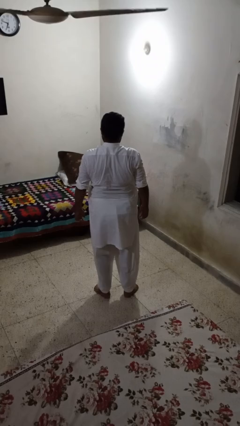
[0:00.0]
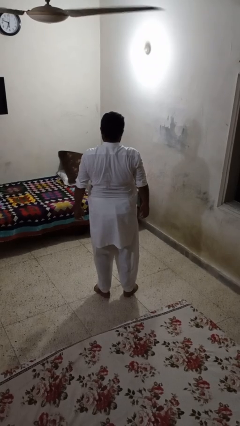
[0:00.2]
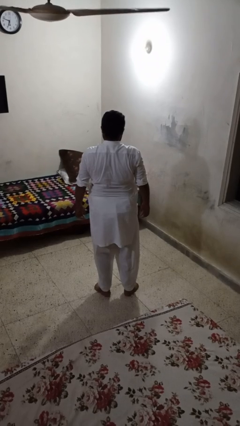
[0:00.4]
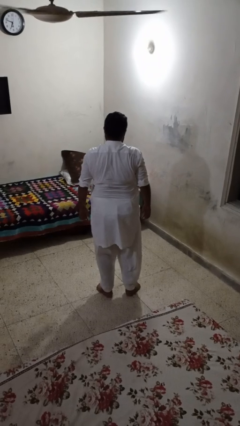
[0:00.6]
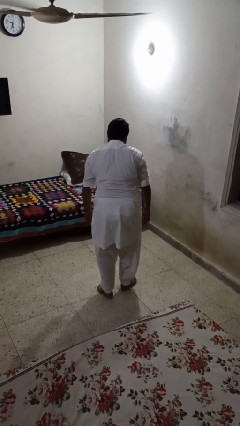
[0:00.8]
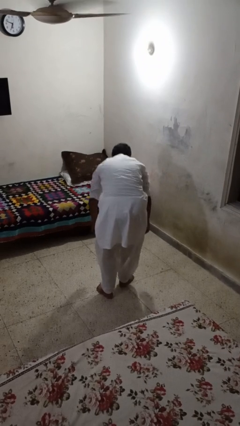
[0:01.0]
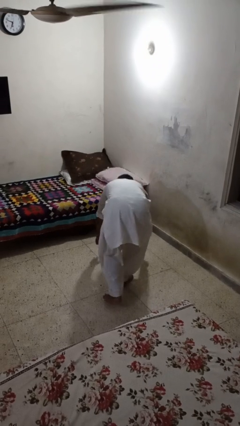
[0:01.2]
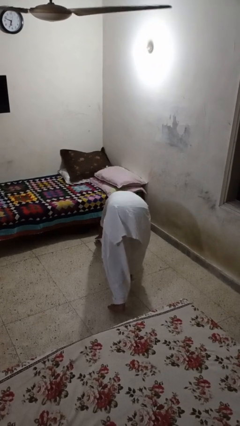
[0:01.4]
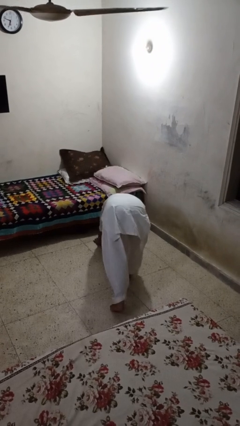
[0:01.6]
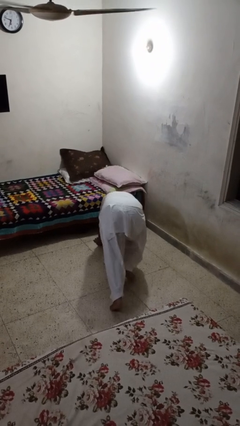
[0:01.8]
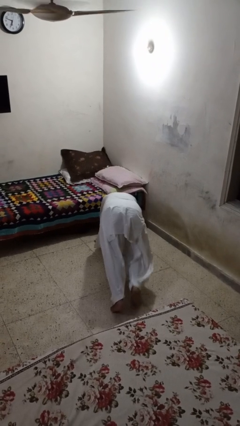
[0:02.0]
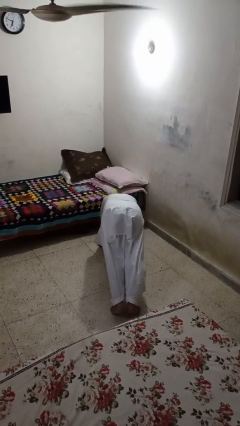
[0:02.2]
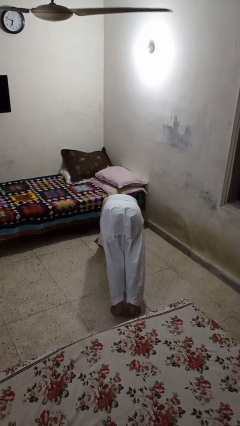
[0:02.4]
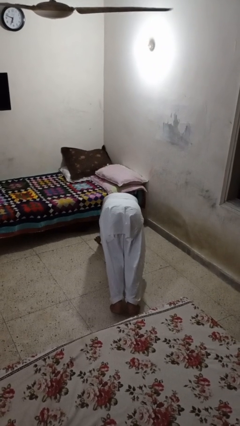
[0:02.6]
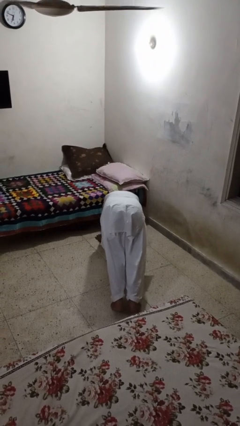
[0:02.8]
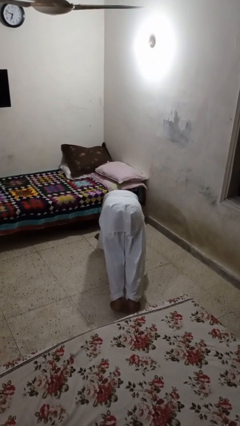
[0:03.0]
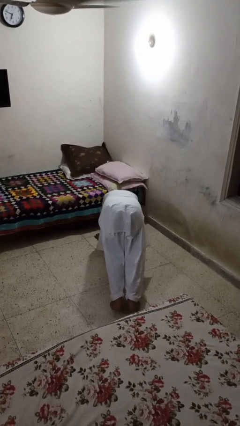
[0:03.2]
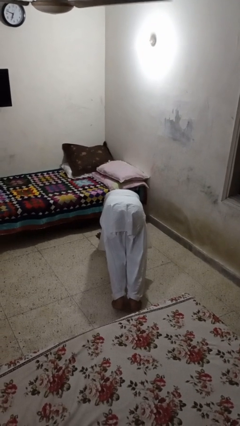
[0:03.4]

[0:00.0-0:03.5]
person exercises with plank

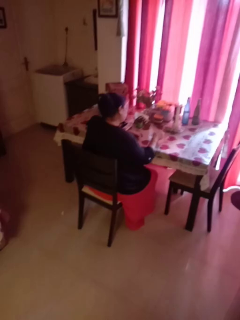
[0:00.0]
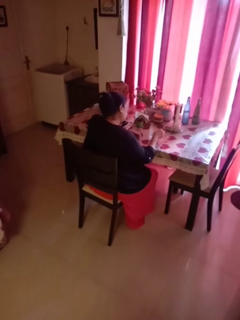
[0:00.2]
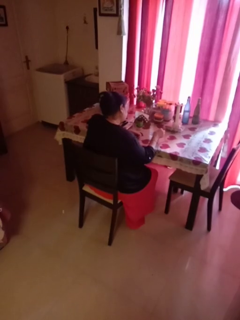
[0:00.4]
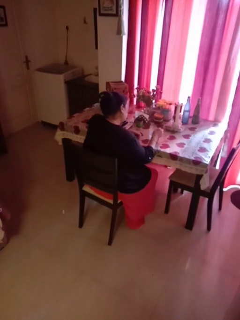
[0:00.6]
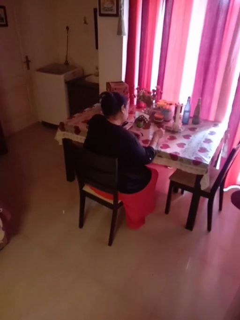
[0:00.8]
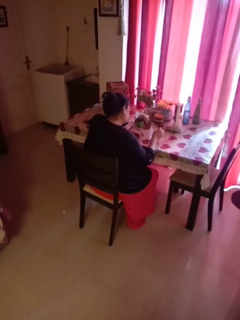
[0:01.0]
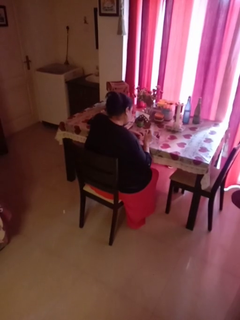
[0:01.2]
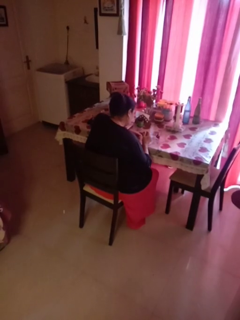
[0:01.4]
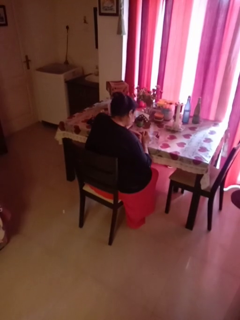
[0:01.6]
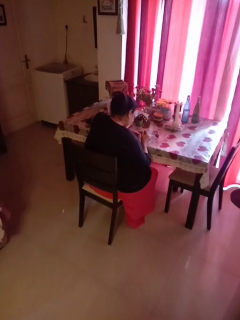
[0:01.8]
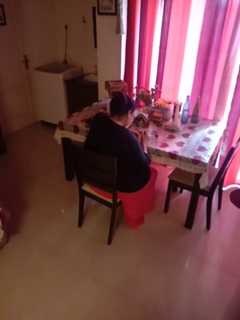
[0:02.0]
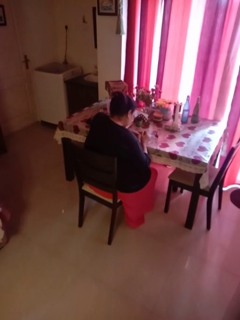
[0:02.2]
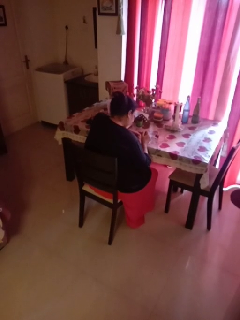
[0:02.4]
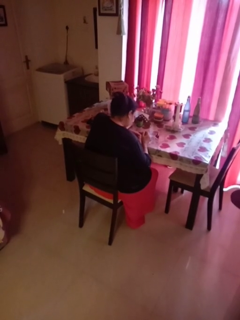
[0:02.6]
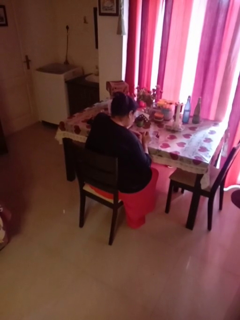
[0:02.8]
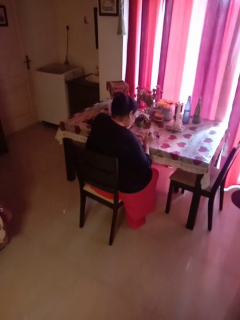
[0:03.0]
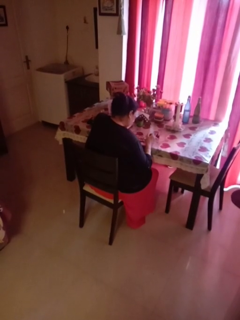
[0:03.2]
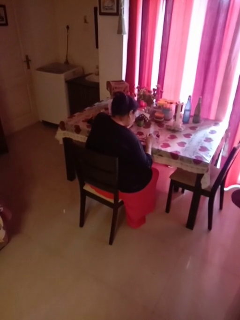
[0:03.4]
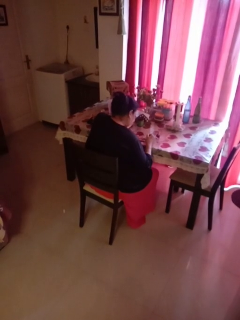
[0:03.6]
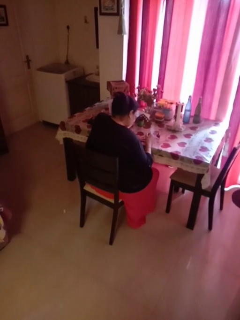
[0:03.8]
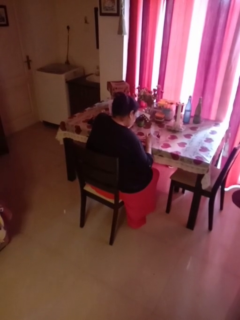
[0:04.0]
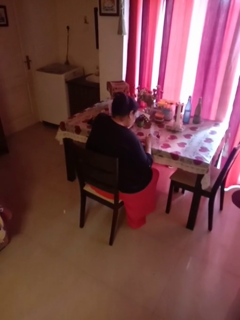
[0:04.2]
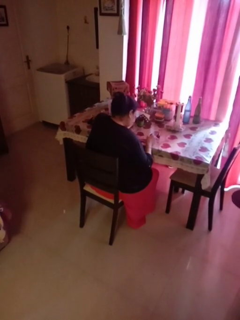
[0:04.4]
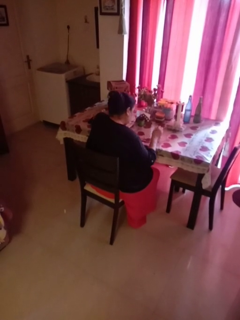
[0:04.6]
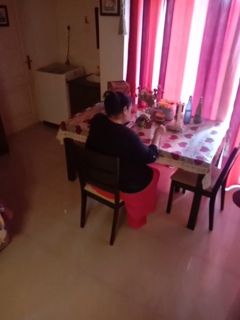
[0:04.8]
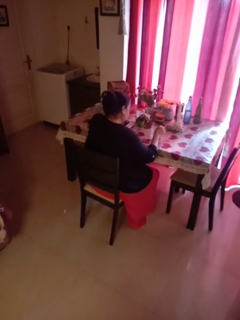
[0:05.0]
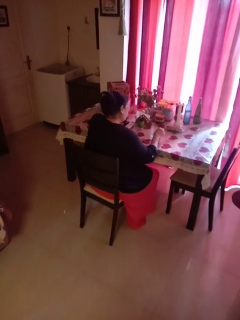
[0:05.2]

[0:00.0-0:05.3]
person paints fingernails

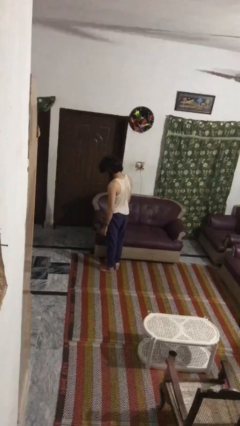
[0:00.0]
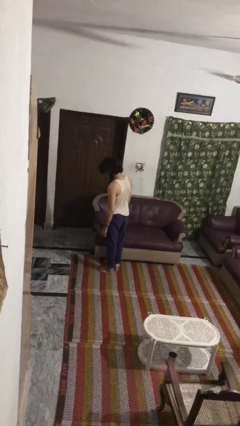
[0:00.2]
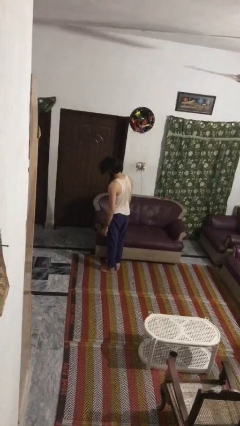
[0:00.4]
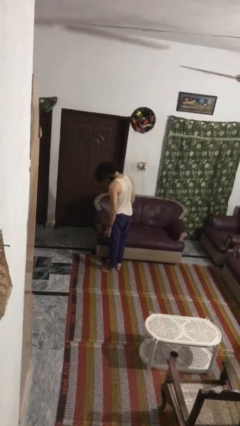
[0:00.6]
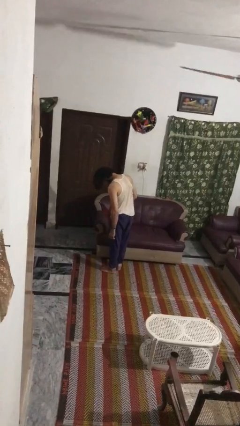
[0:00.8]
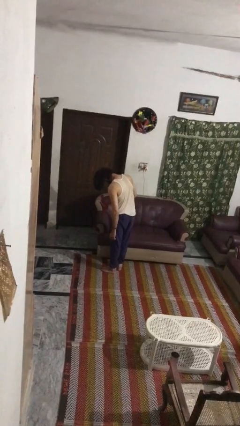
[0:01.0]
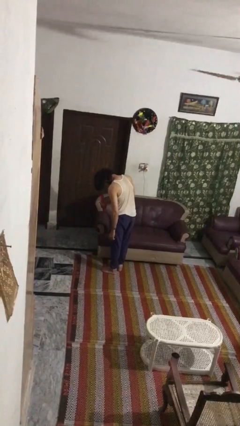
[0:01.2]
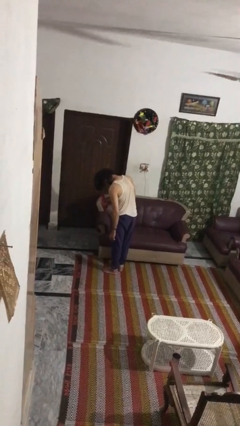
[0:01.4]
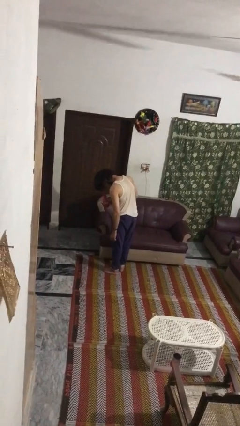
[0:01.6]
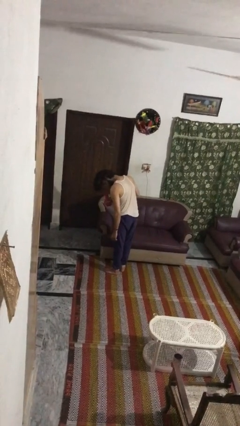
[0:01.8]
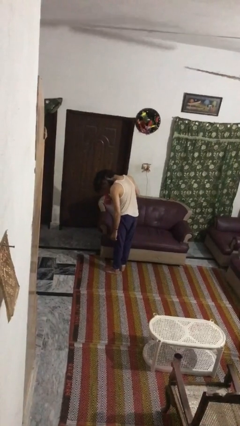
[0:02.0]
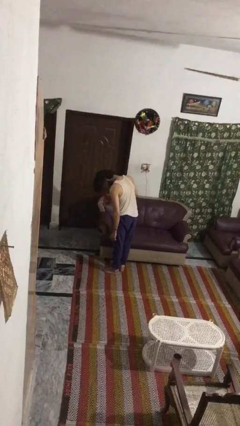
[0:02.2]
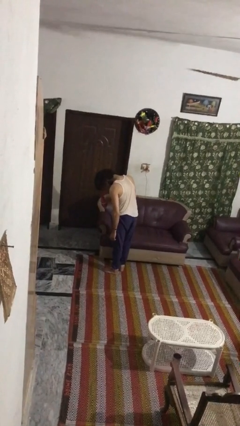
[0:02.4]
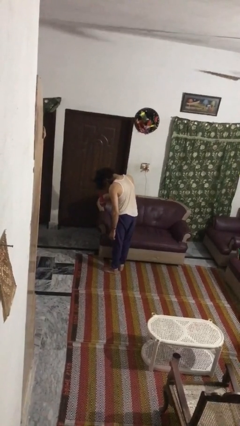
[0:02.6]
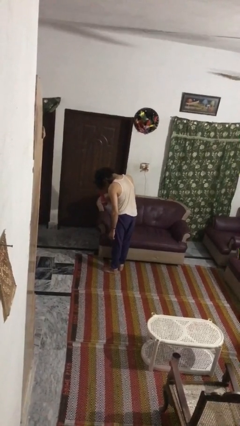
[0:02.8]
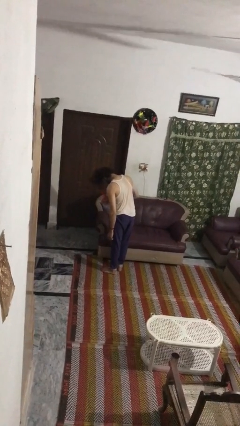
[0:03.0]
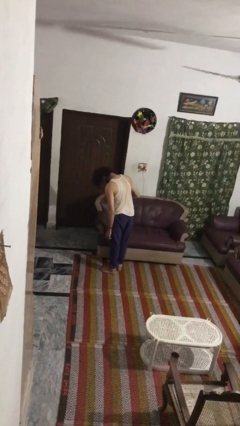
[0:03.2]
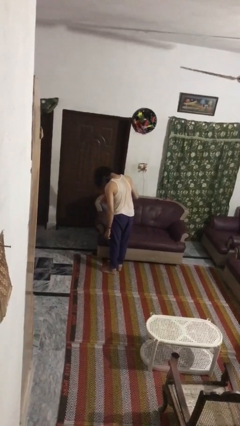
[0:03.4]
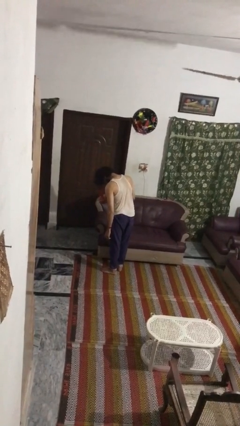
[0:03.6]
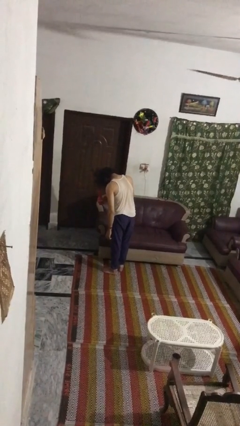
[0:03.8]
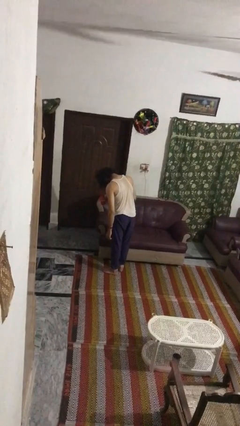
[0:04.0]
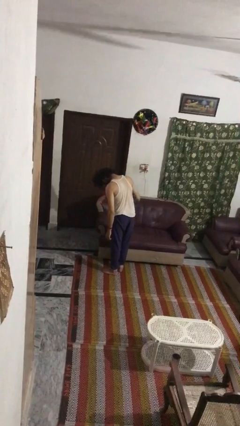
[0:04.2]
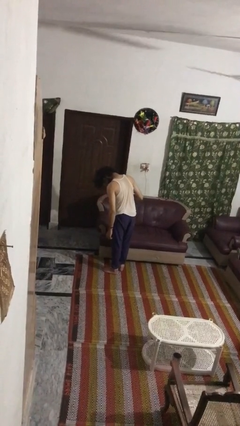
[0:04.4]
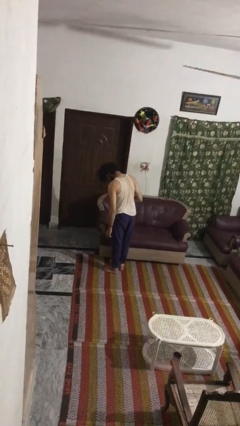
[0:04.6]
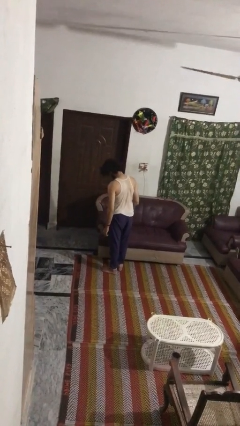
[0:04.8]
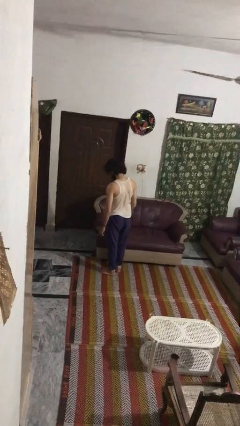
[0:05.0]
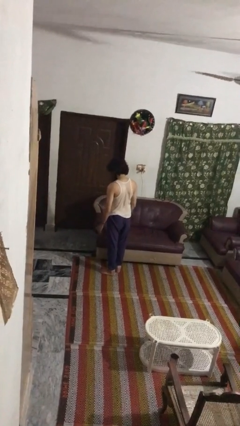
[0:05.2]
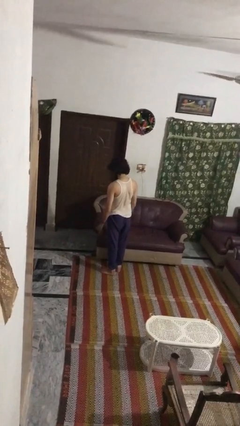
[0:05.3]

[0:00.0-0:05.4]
person dries hair with hairdryer

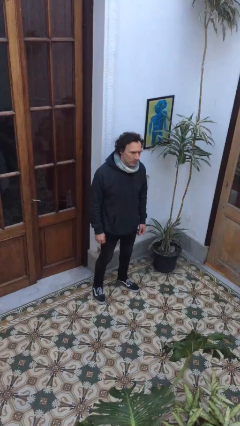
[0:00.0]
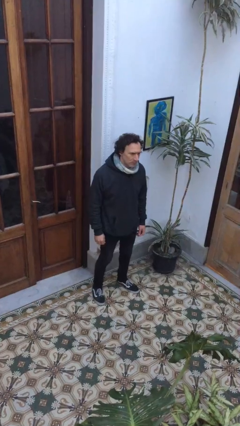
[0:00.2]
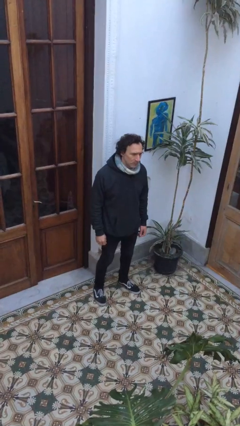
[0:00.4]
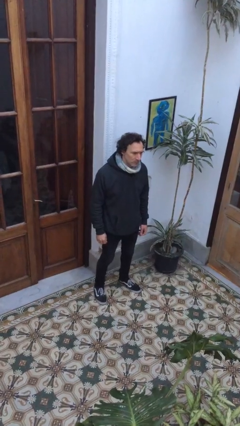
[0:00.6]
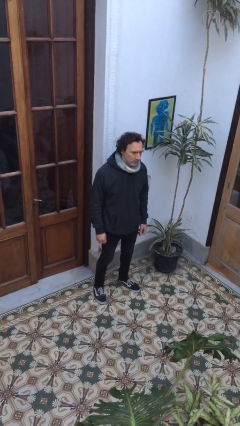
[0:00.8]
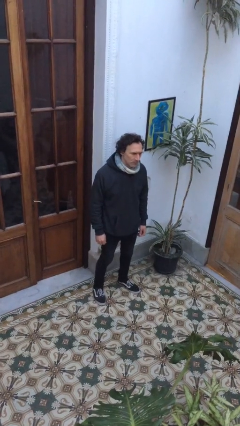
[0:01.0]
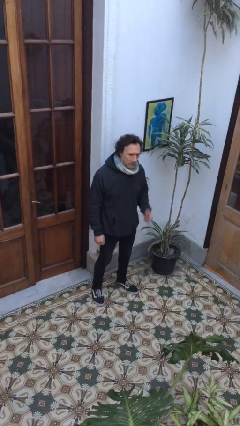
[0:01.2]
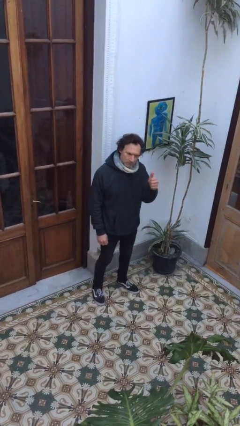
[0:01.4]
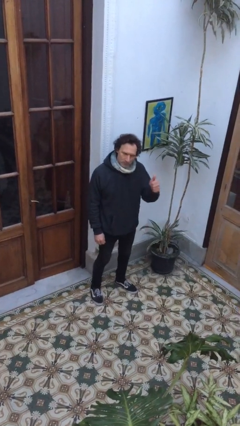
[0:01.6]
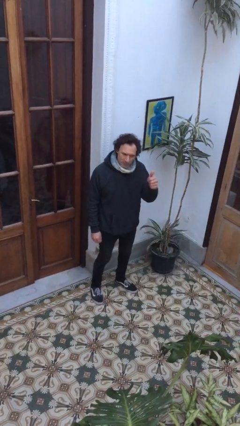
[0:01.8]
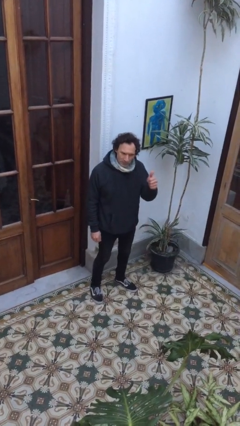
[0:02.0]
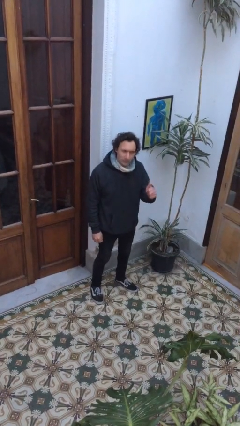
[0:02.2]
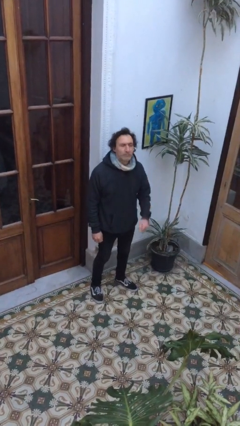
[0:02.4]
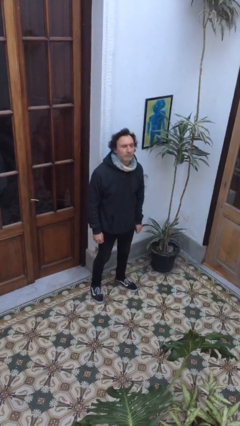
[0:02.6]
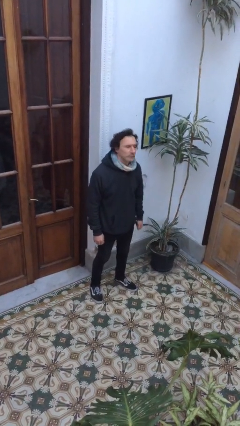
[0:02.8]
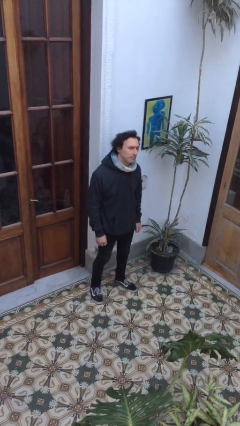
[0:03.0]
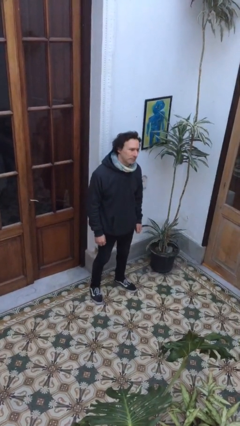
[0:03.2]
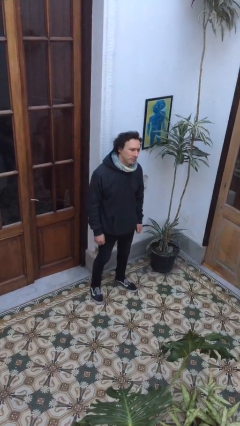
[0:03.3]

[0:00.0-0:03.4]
person gestures thumbs up

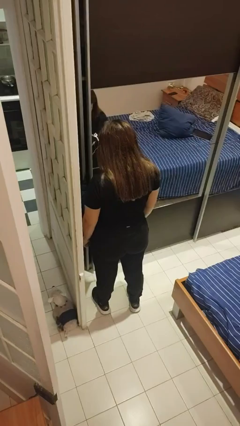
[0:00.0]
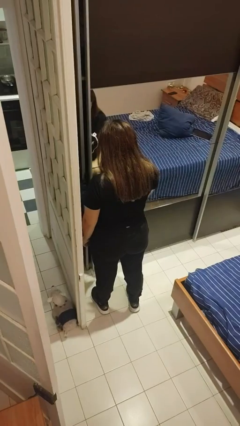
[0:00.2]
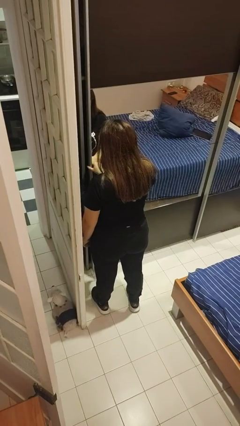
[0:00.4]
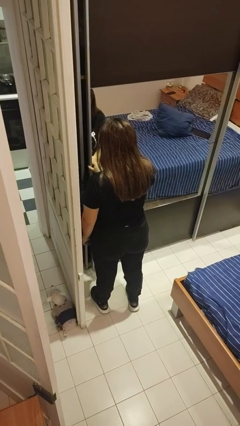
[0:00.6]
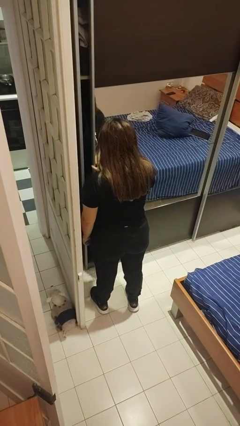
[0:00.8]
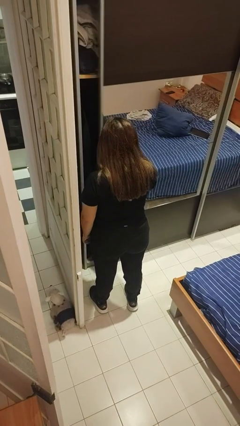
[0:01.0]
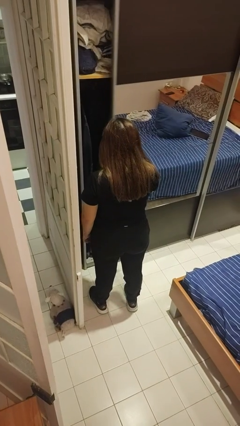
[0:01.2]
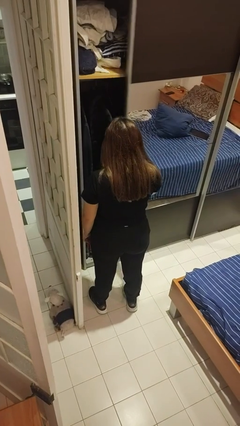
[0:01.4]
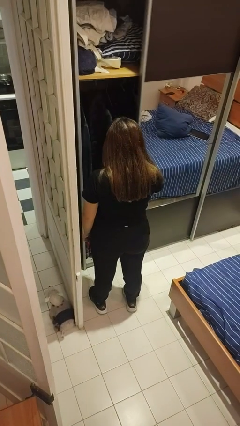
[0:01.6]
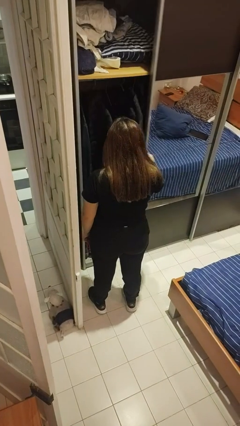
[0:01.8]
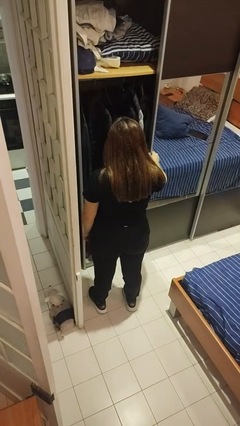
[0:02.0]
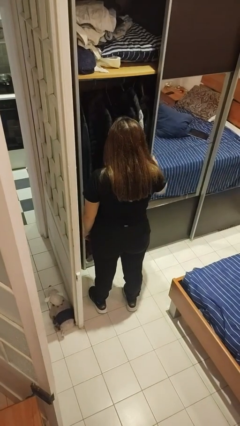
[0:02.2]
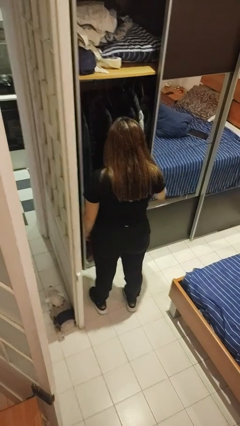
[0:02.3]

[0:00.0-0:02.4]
person opens dresser drawer
